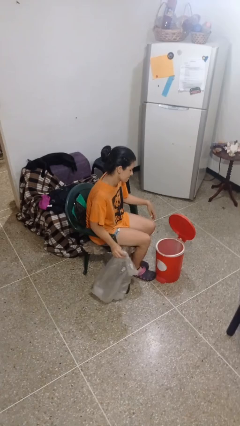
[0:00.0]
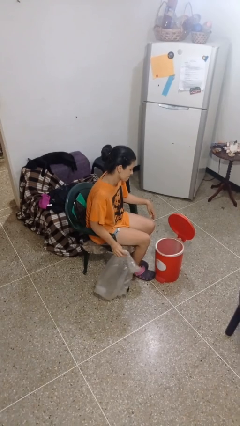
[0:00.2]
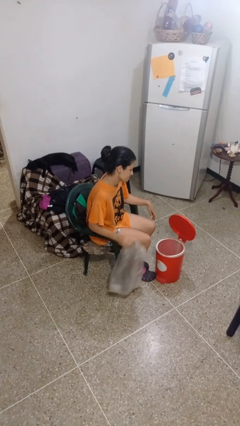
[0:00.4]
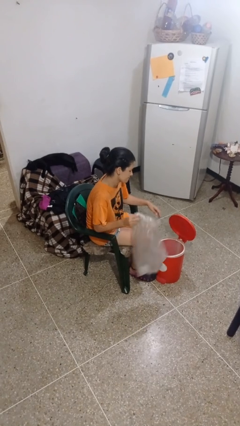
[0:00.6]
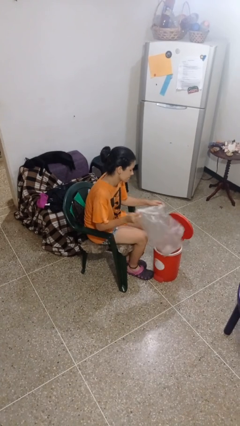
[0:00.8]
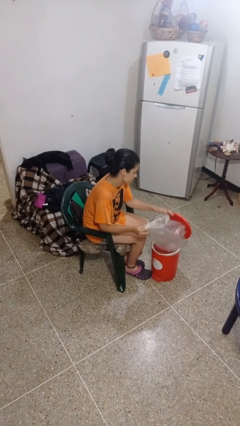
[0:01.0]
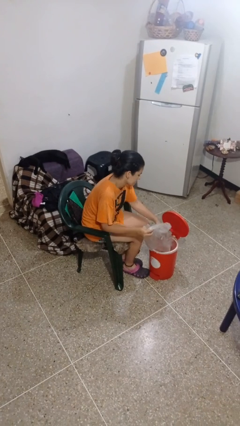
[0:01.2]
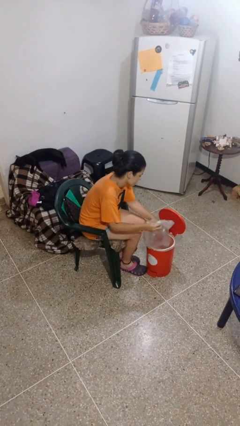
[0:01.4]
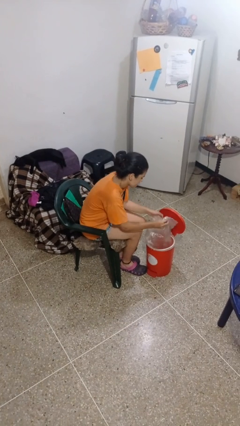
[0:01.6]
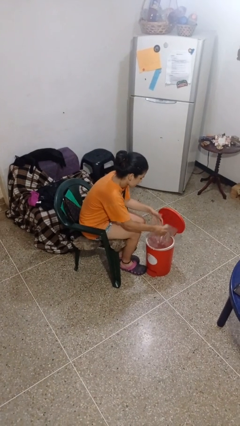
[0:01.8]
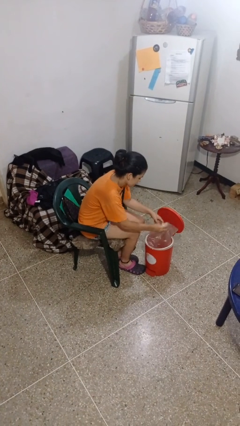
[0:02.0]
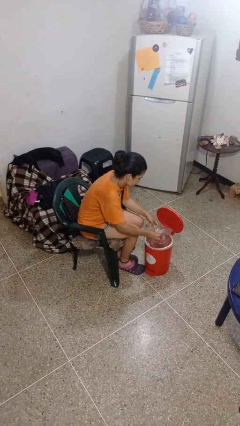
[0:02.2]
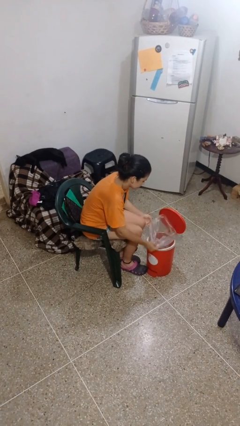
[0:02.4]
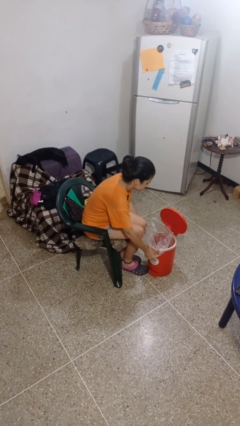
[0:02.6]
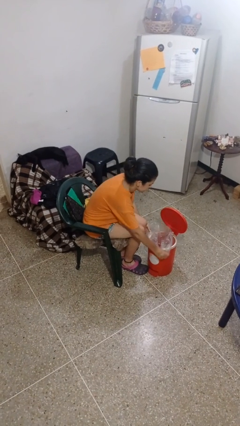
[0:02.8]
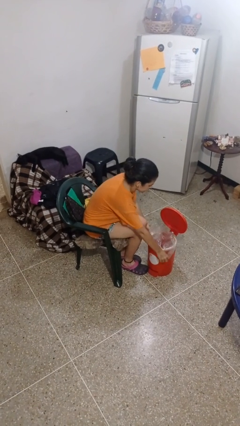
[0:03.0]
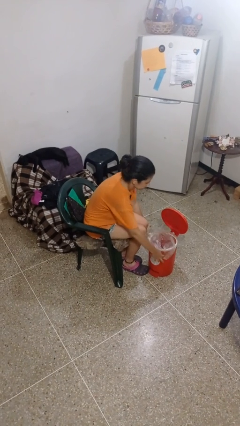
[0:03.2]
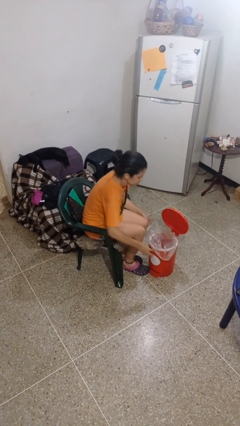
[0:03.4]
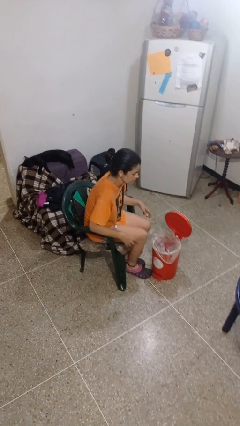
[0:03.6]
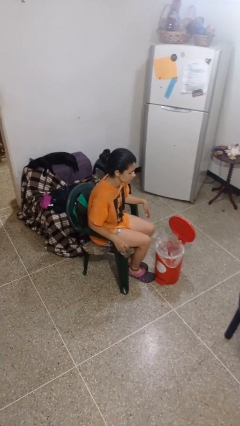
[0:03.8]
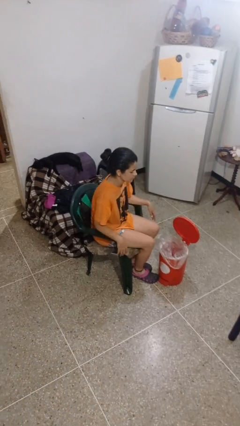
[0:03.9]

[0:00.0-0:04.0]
person inserts trashbag into trashcan

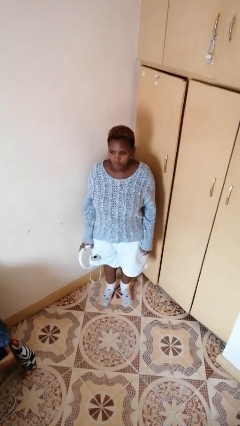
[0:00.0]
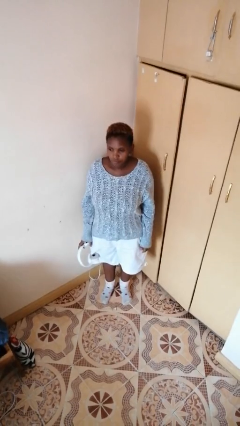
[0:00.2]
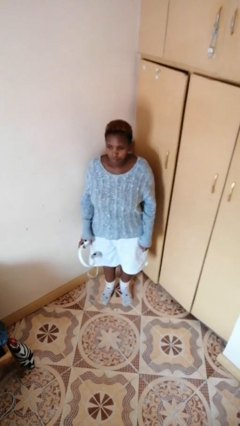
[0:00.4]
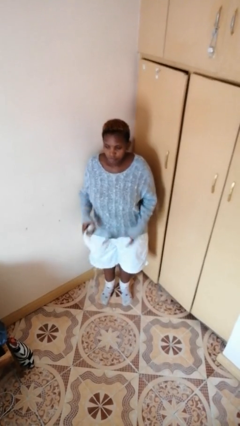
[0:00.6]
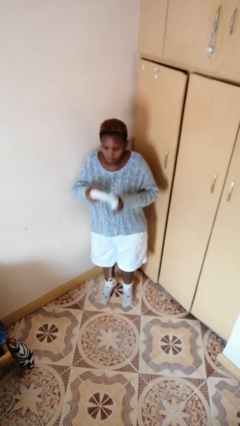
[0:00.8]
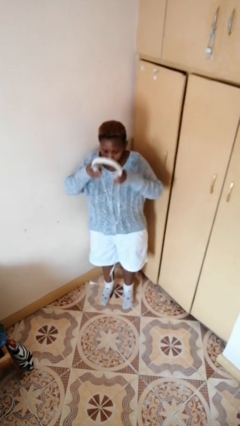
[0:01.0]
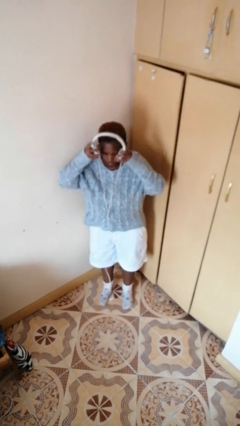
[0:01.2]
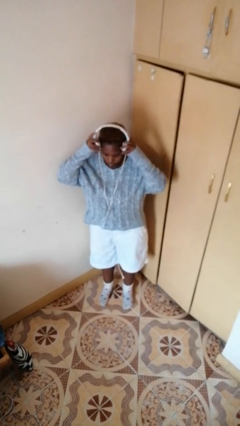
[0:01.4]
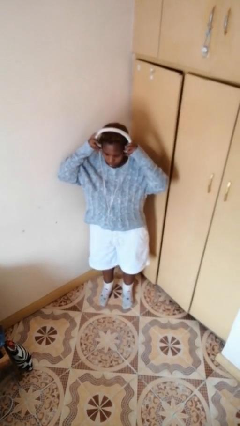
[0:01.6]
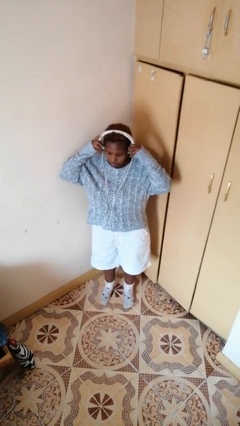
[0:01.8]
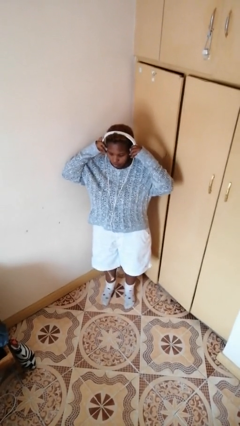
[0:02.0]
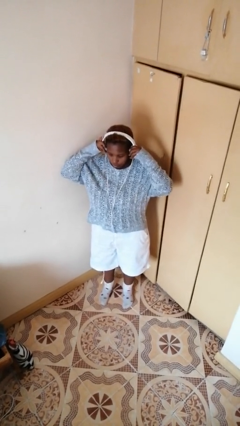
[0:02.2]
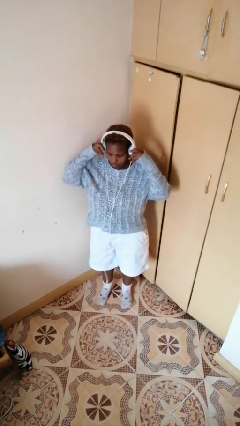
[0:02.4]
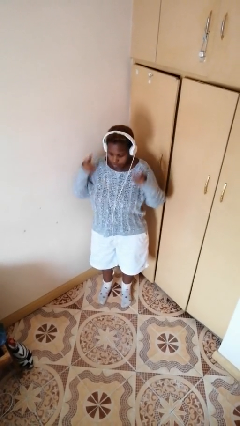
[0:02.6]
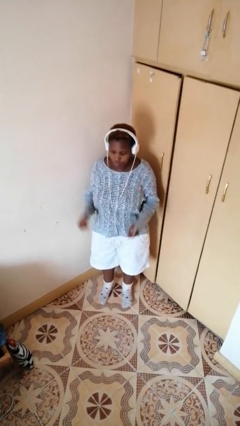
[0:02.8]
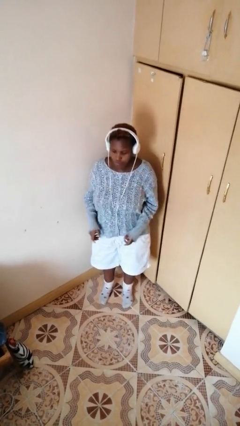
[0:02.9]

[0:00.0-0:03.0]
person puts on headphones

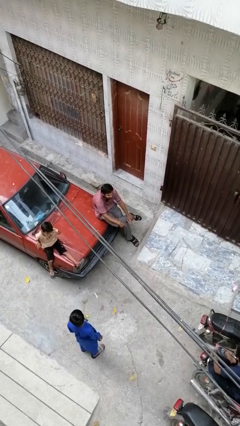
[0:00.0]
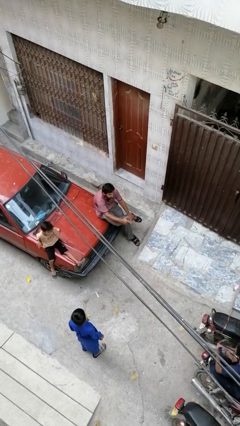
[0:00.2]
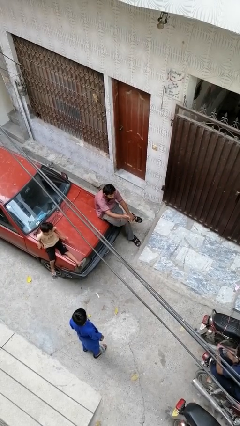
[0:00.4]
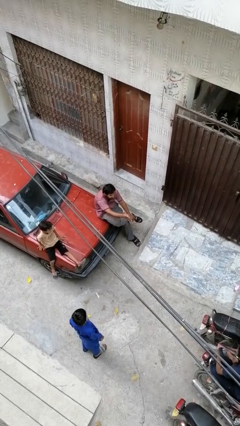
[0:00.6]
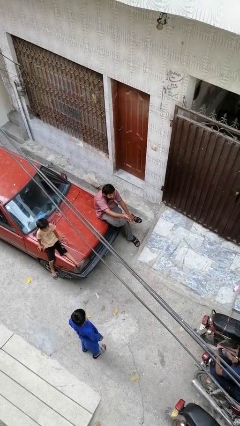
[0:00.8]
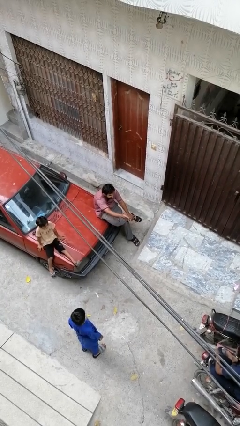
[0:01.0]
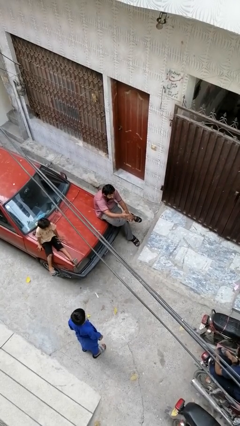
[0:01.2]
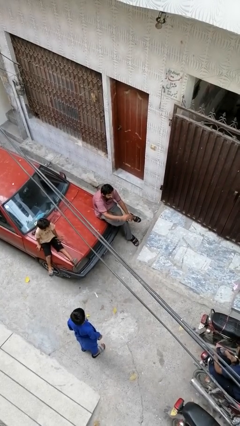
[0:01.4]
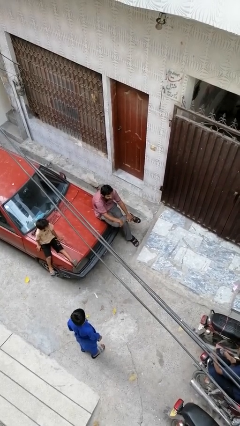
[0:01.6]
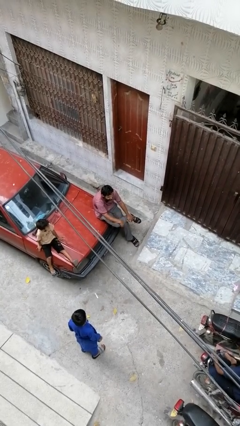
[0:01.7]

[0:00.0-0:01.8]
person points at person

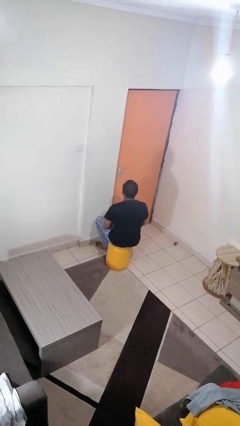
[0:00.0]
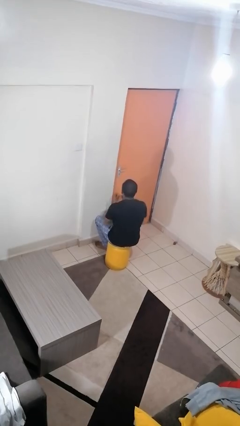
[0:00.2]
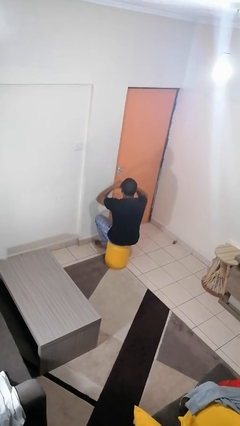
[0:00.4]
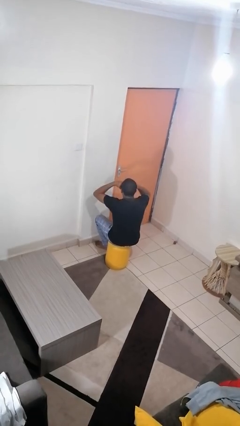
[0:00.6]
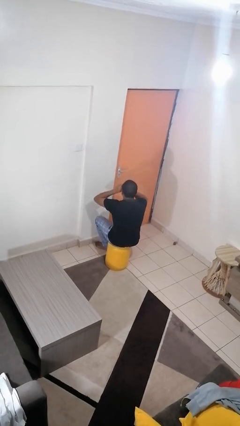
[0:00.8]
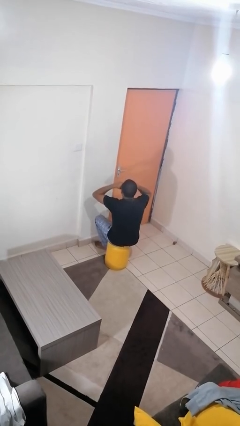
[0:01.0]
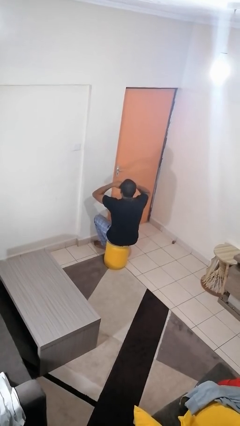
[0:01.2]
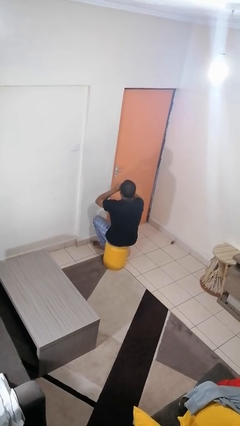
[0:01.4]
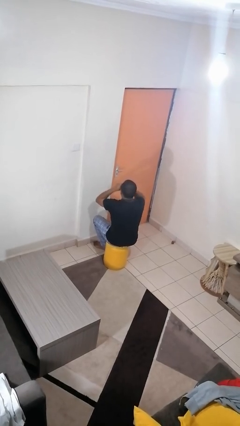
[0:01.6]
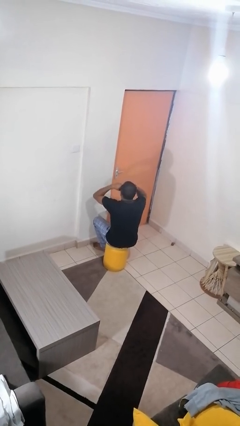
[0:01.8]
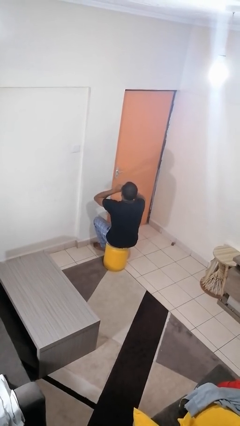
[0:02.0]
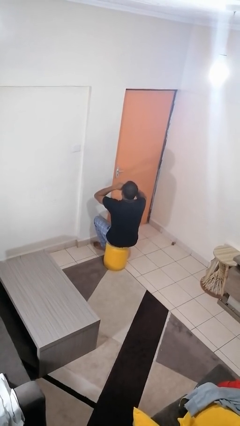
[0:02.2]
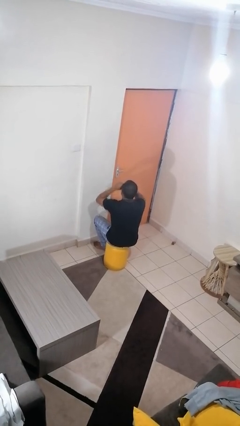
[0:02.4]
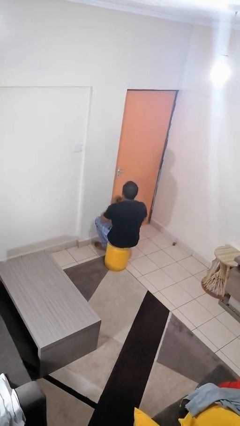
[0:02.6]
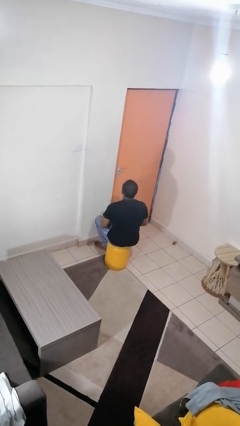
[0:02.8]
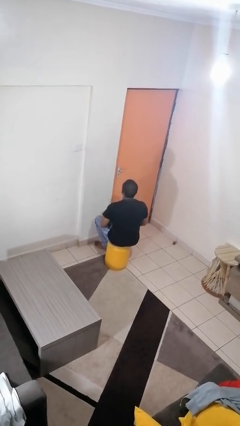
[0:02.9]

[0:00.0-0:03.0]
person rubs eyes

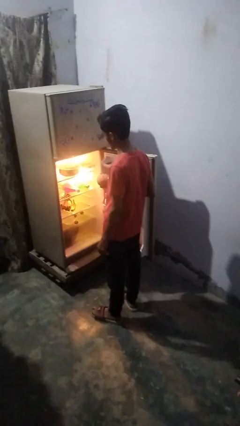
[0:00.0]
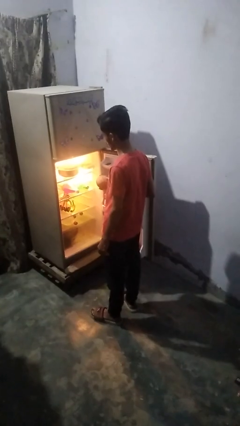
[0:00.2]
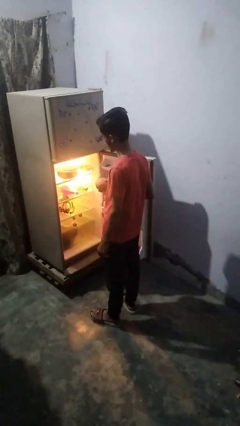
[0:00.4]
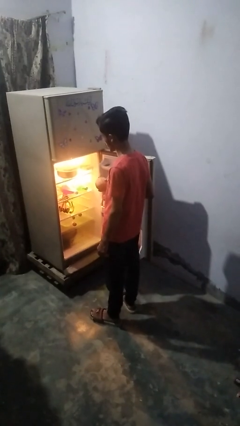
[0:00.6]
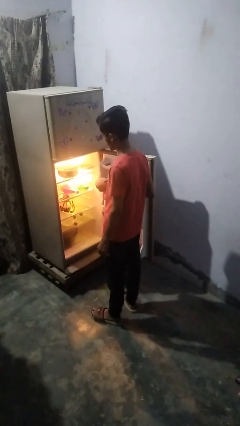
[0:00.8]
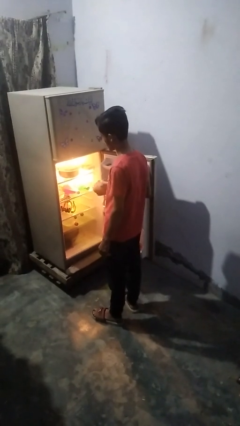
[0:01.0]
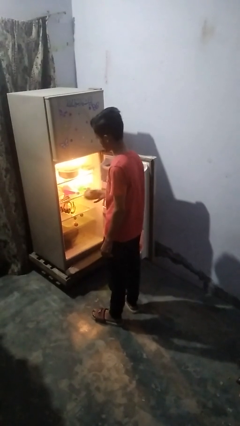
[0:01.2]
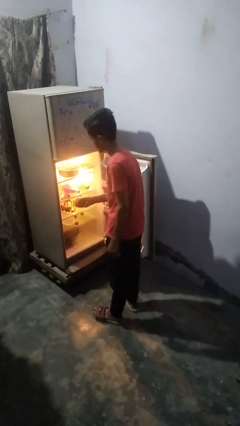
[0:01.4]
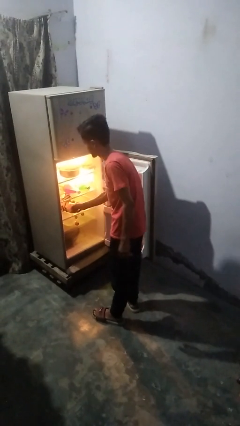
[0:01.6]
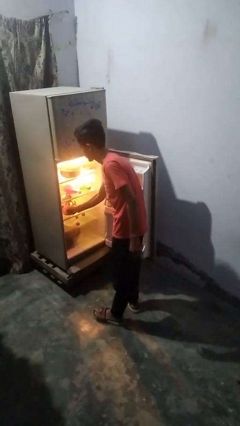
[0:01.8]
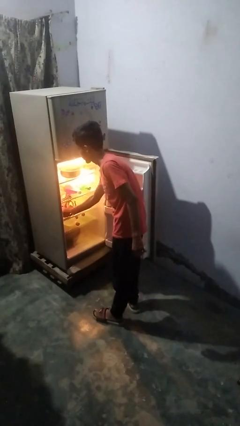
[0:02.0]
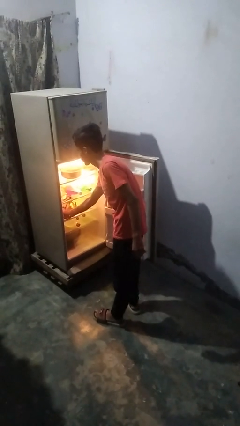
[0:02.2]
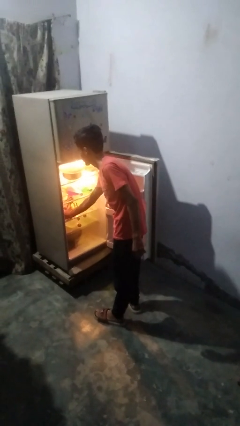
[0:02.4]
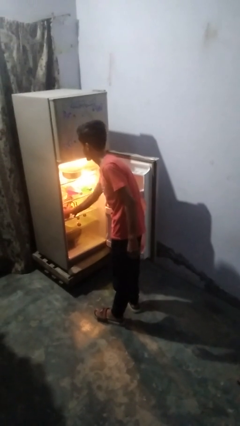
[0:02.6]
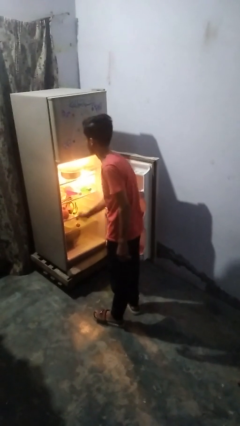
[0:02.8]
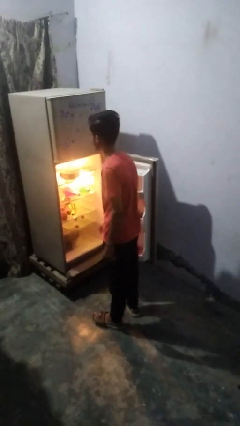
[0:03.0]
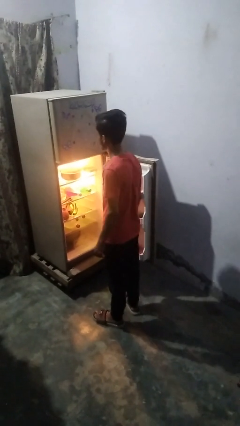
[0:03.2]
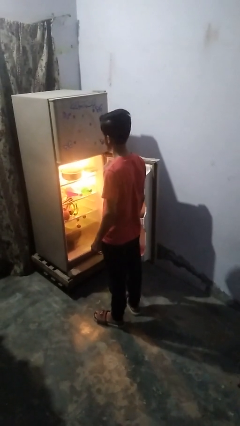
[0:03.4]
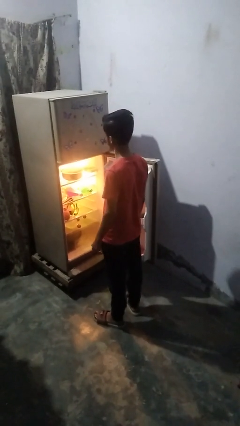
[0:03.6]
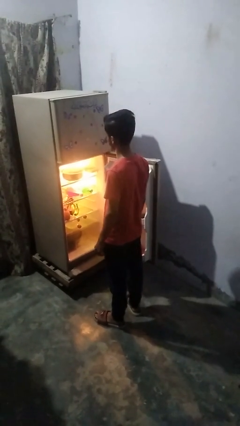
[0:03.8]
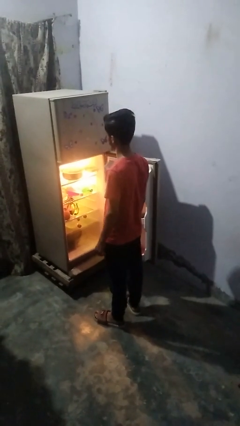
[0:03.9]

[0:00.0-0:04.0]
person takes object from refrigerator

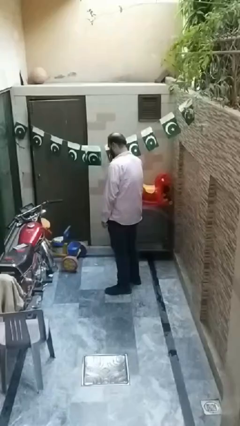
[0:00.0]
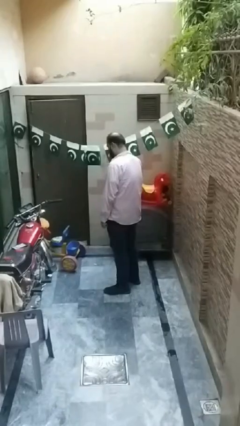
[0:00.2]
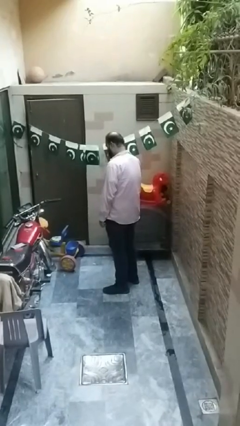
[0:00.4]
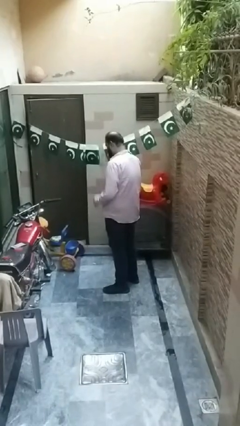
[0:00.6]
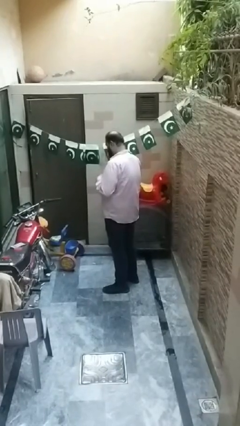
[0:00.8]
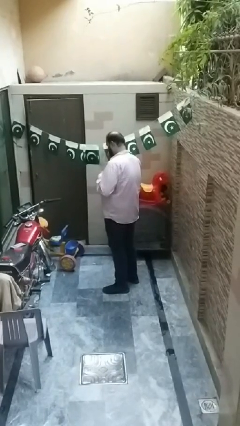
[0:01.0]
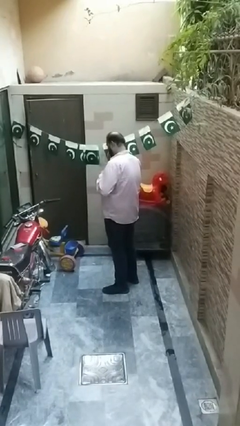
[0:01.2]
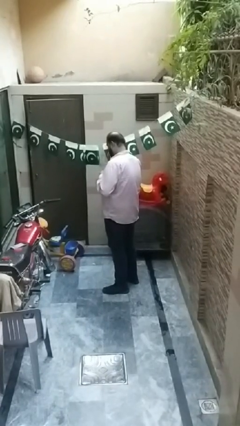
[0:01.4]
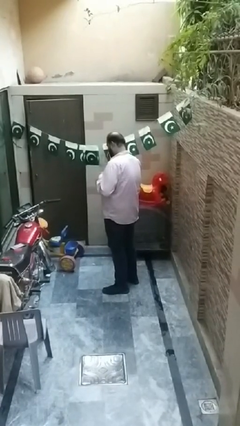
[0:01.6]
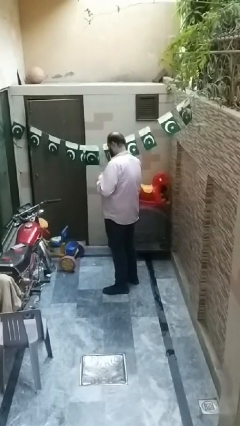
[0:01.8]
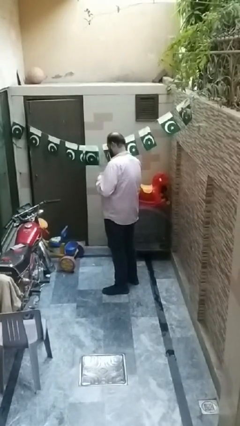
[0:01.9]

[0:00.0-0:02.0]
person unbuttons shirt
